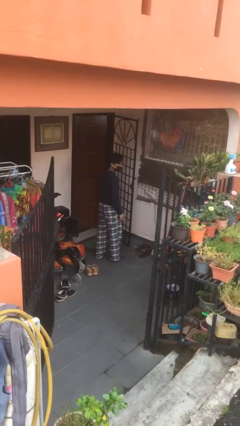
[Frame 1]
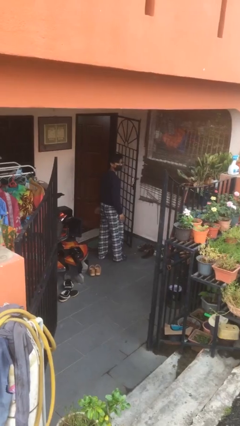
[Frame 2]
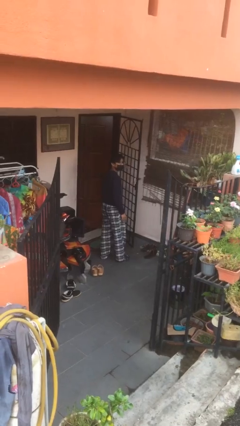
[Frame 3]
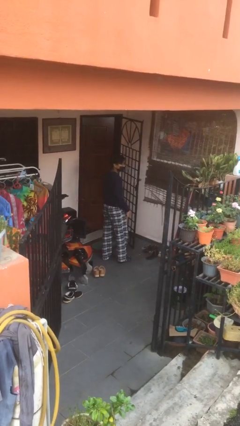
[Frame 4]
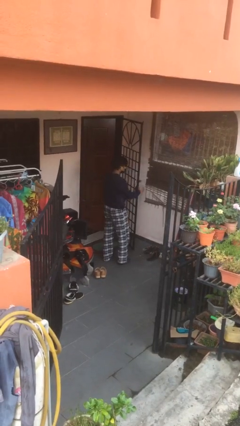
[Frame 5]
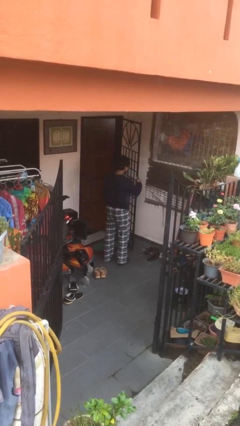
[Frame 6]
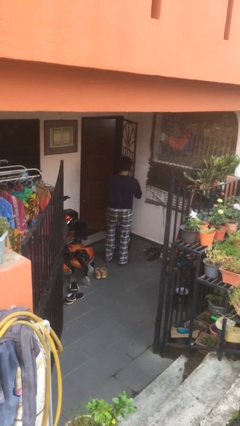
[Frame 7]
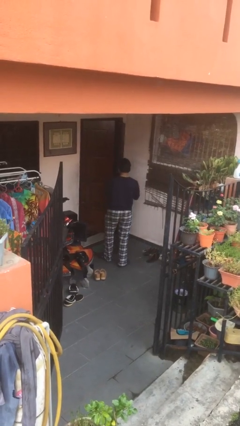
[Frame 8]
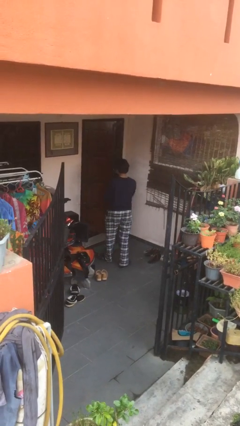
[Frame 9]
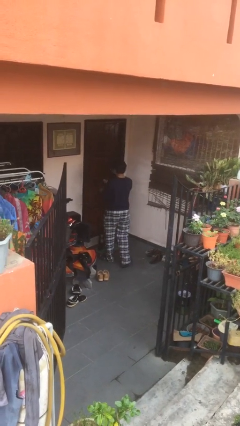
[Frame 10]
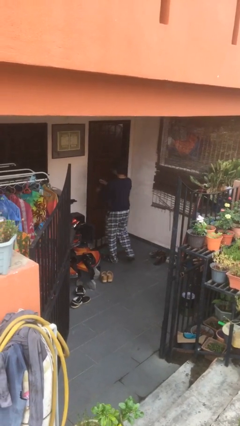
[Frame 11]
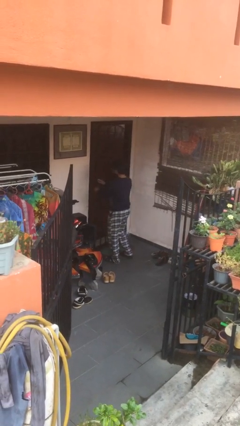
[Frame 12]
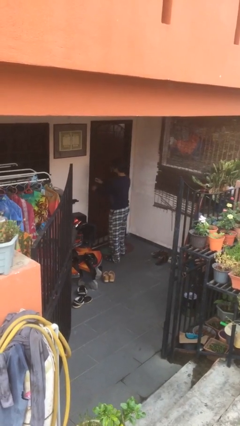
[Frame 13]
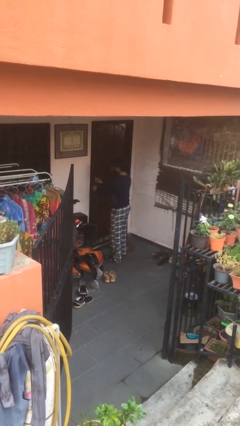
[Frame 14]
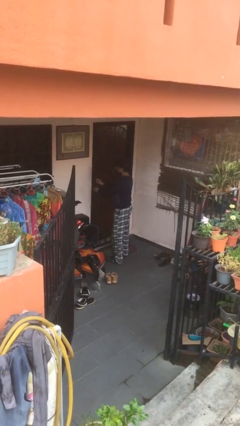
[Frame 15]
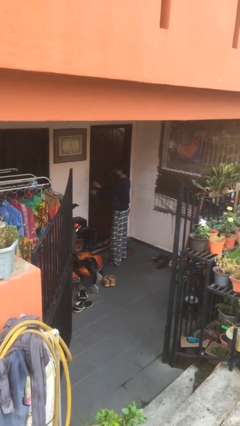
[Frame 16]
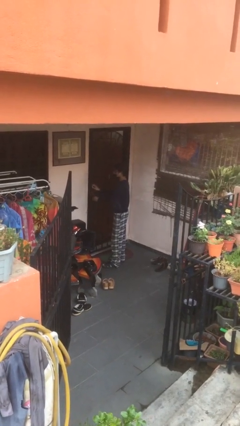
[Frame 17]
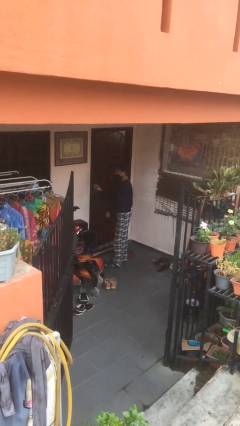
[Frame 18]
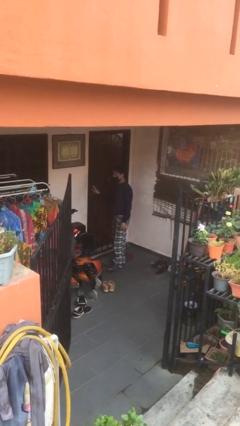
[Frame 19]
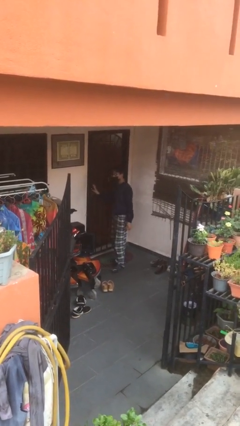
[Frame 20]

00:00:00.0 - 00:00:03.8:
person closes facility door

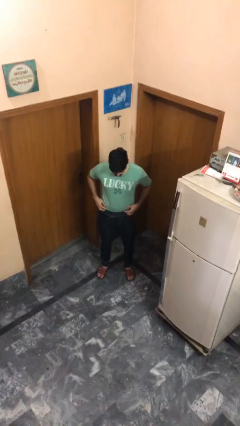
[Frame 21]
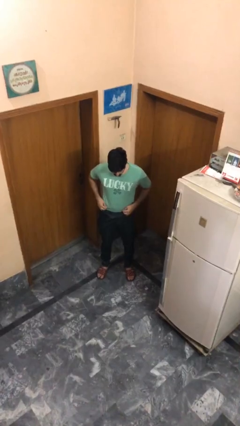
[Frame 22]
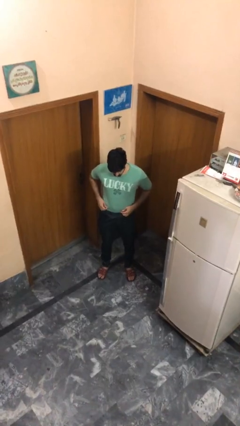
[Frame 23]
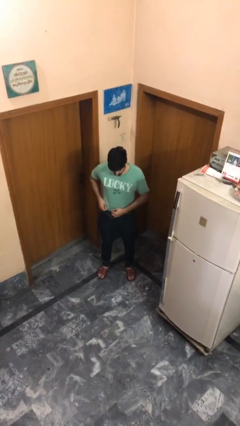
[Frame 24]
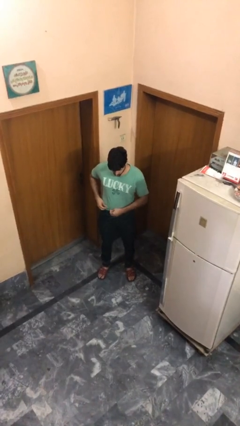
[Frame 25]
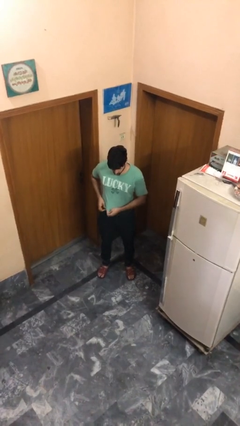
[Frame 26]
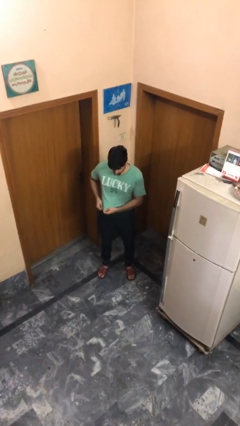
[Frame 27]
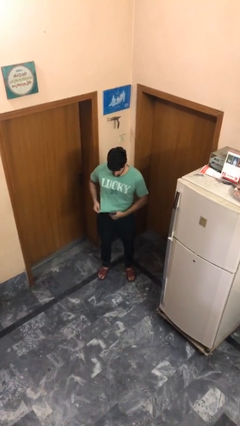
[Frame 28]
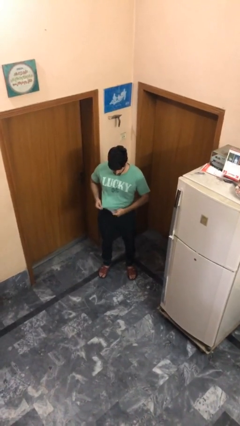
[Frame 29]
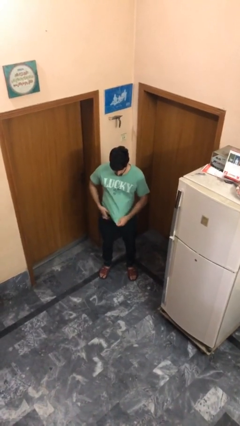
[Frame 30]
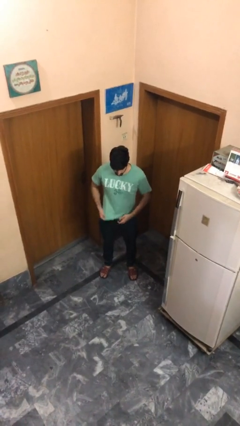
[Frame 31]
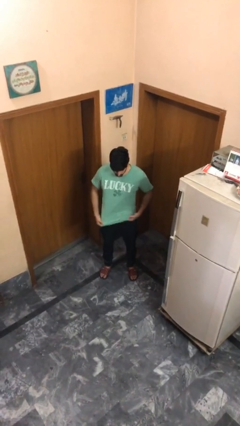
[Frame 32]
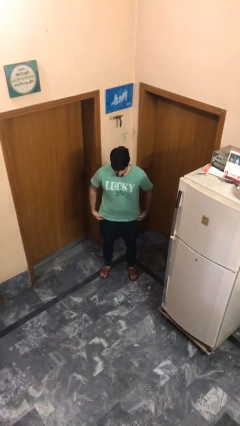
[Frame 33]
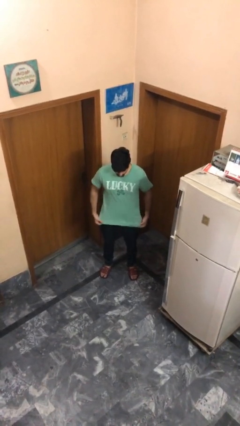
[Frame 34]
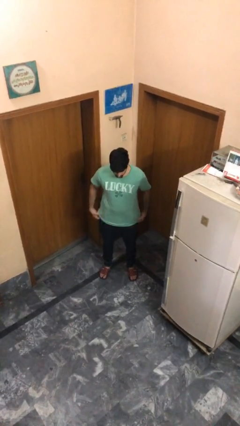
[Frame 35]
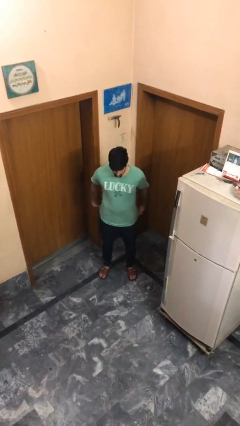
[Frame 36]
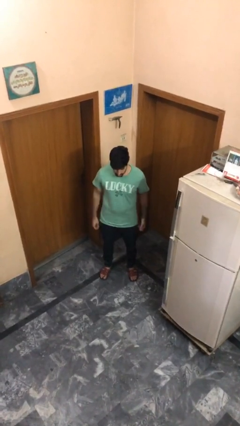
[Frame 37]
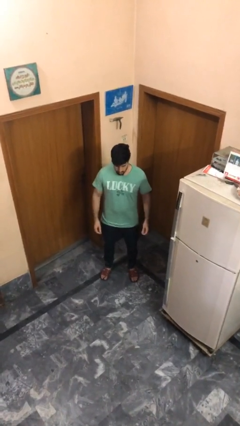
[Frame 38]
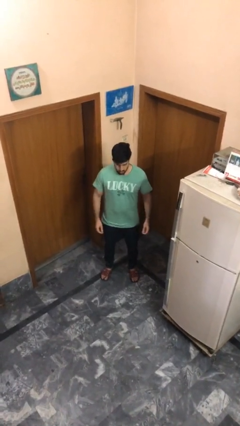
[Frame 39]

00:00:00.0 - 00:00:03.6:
person untucks shirt

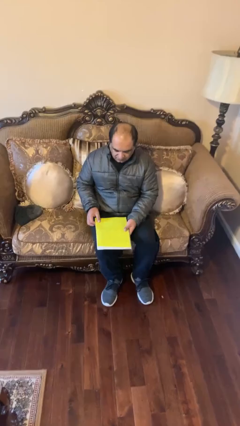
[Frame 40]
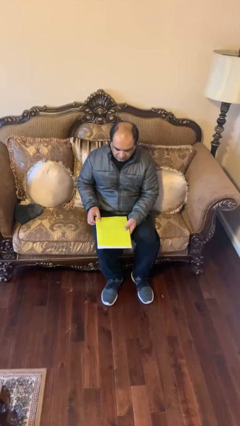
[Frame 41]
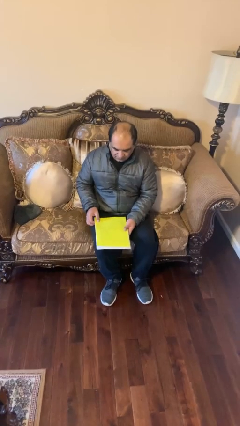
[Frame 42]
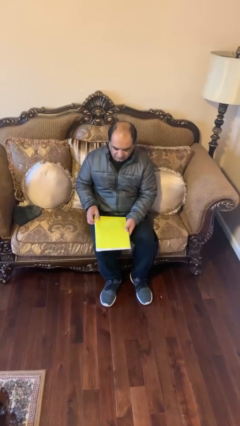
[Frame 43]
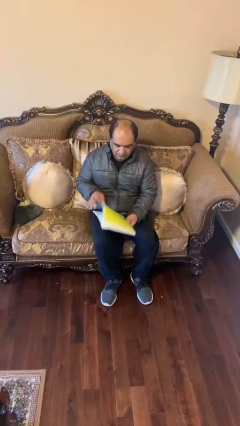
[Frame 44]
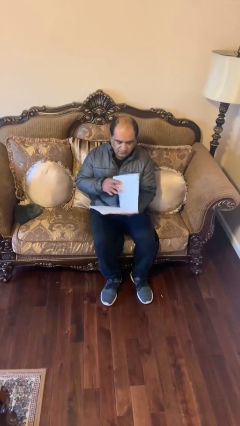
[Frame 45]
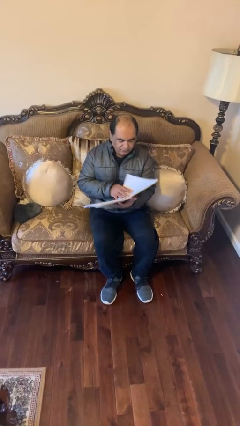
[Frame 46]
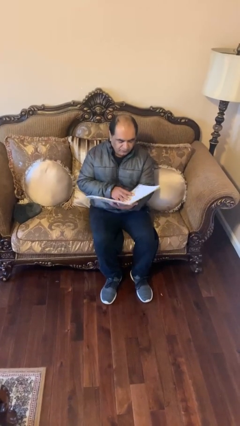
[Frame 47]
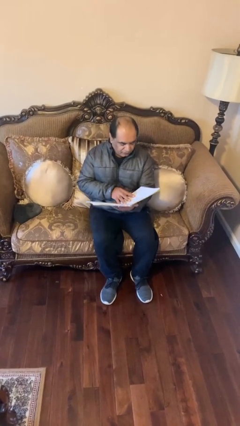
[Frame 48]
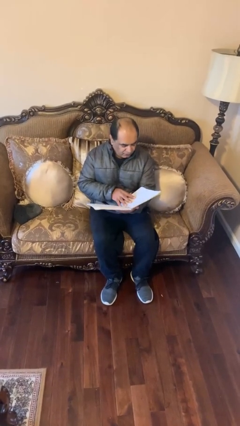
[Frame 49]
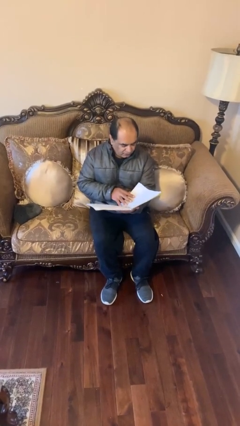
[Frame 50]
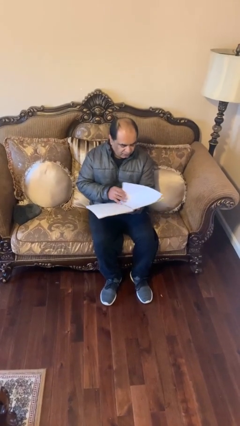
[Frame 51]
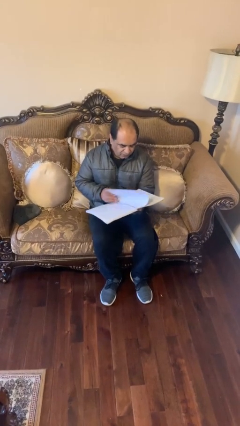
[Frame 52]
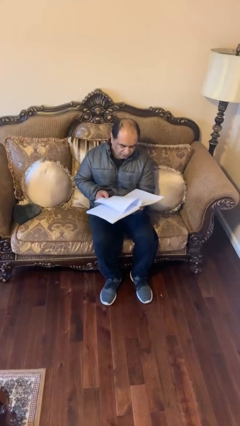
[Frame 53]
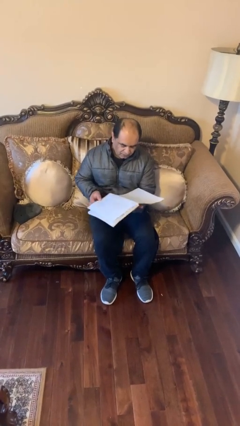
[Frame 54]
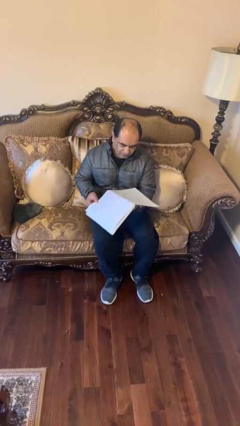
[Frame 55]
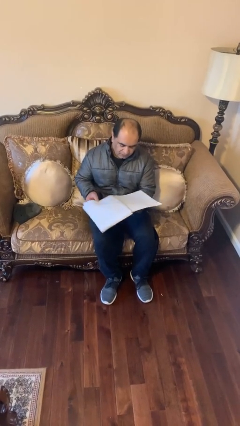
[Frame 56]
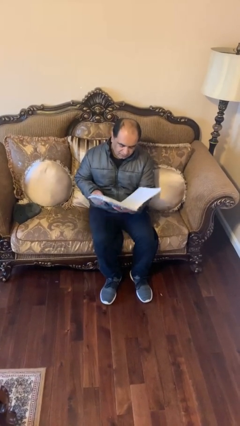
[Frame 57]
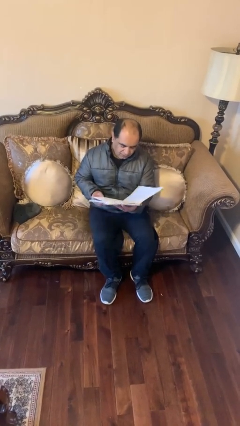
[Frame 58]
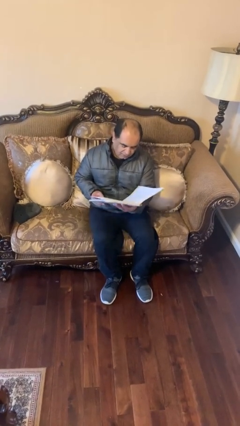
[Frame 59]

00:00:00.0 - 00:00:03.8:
person reads document

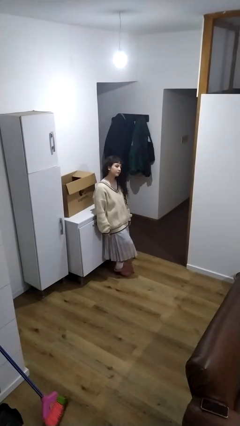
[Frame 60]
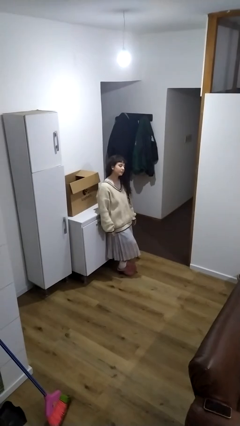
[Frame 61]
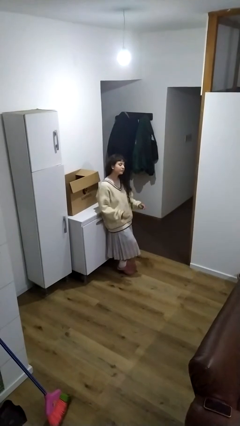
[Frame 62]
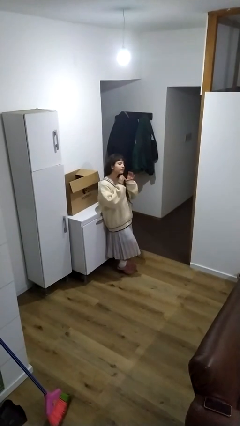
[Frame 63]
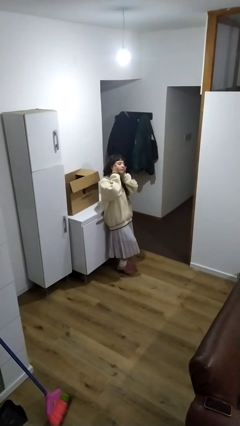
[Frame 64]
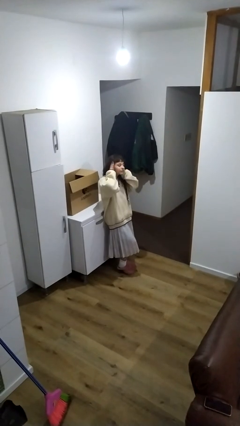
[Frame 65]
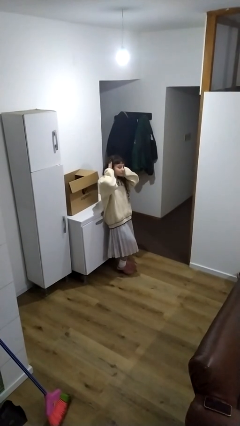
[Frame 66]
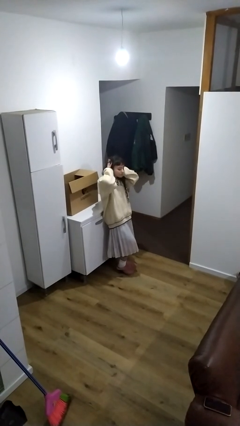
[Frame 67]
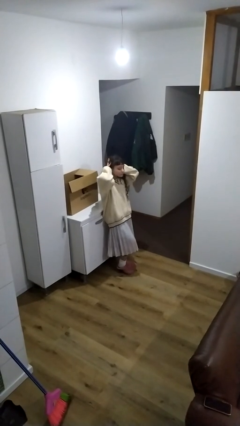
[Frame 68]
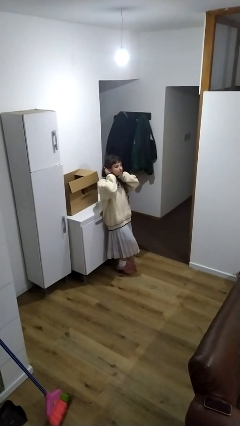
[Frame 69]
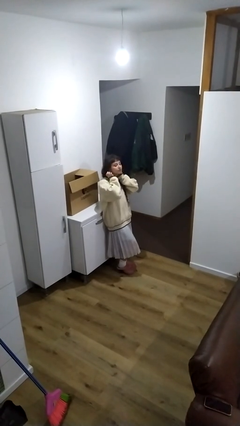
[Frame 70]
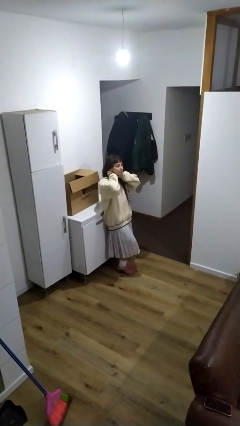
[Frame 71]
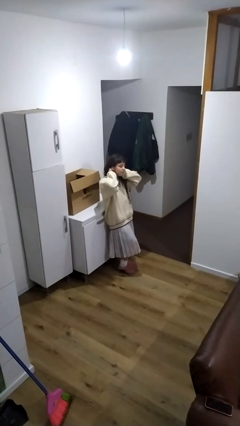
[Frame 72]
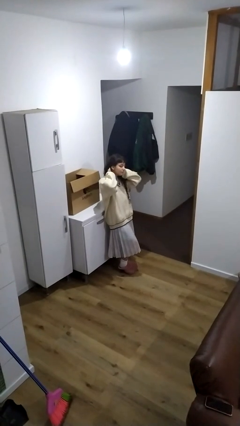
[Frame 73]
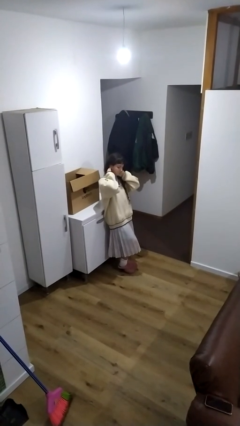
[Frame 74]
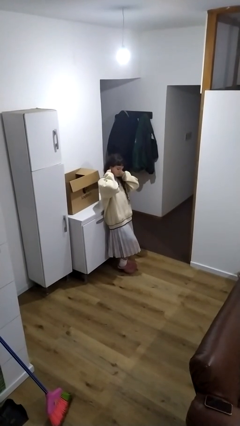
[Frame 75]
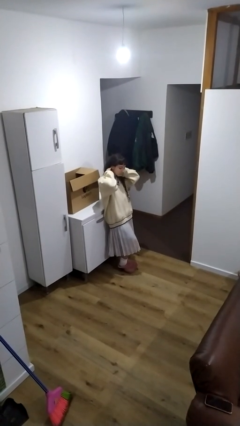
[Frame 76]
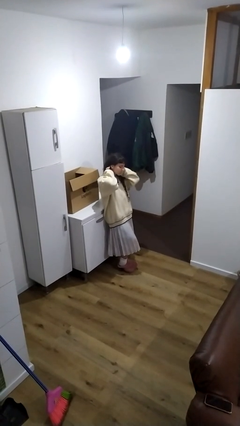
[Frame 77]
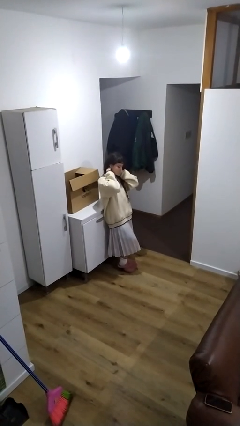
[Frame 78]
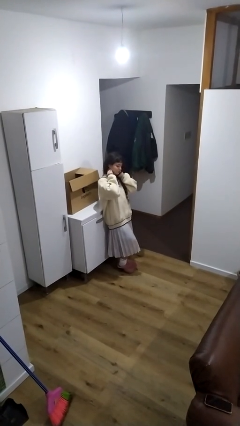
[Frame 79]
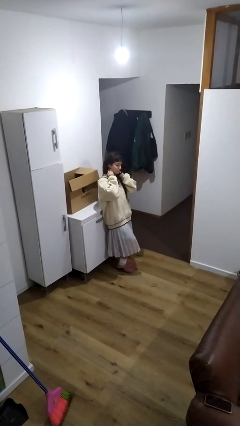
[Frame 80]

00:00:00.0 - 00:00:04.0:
person rubs neck

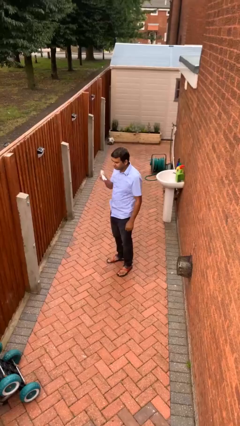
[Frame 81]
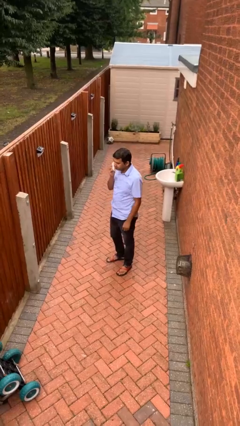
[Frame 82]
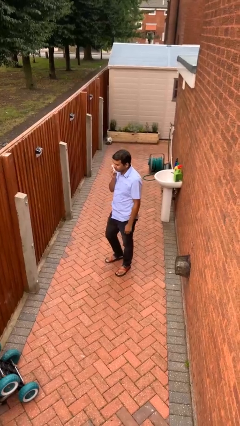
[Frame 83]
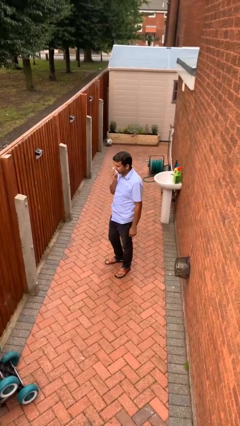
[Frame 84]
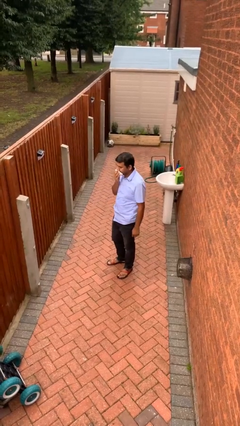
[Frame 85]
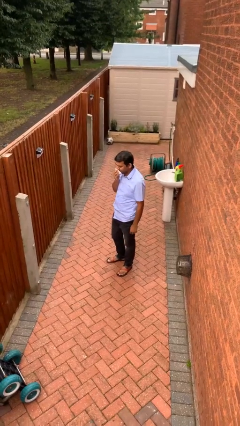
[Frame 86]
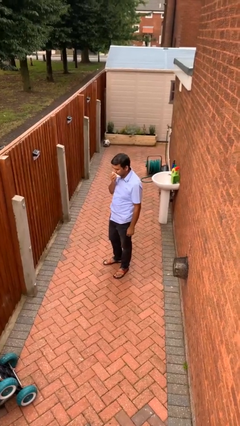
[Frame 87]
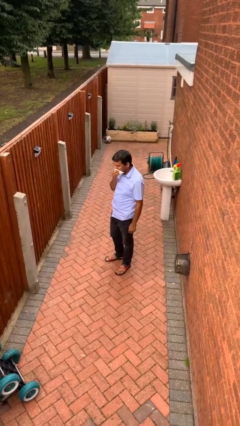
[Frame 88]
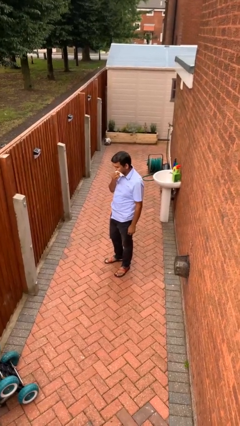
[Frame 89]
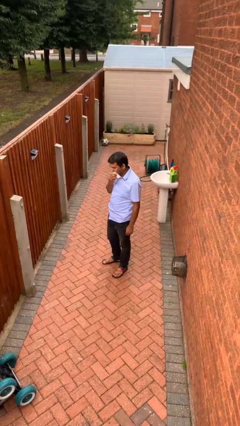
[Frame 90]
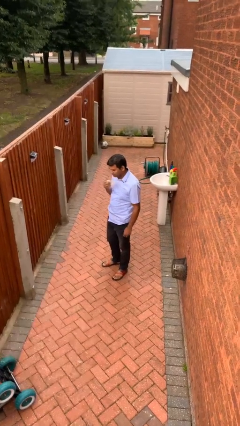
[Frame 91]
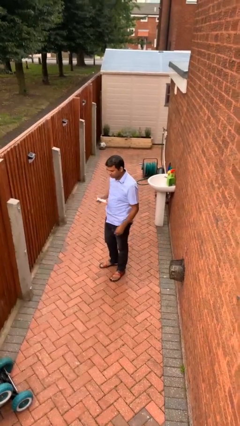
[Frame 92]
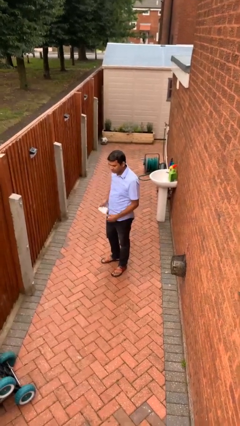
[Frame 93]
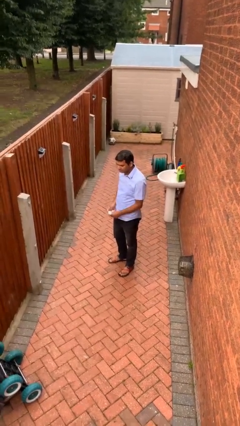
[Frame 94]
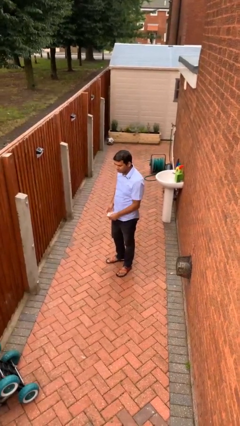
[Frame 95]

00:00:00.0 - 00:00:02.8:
person wipes mouth with napkin
